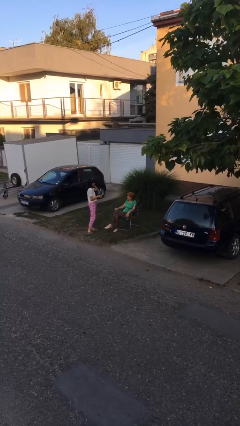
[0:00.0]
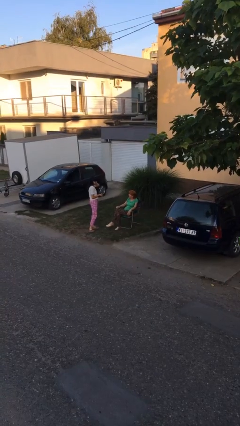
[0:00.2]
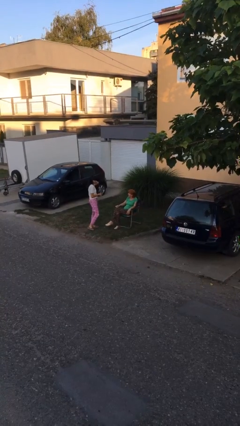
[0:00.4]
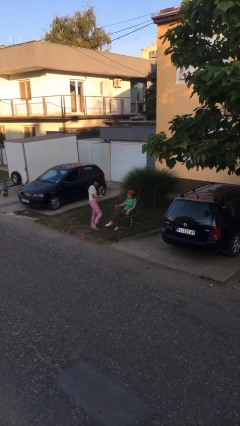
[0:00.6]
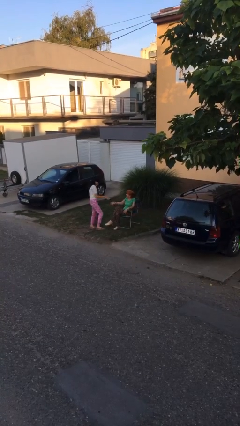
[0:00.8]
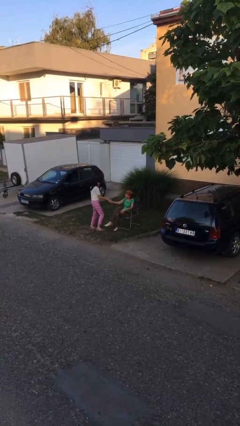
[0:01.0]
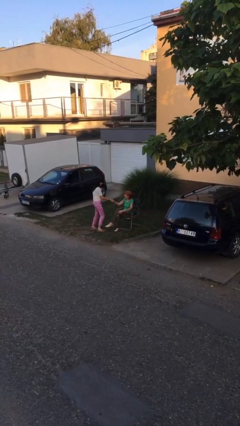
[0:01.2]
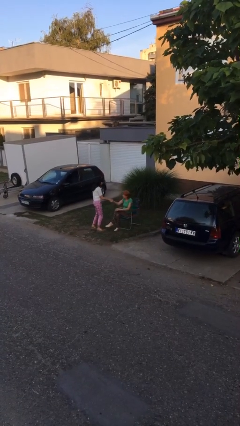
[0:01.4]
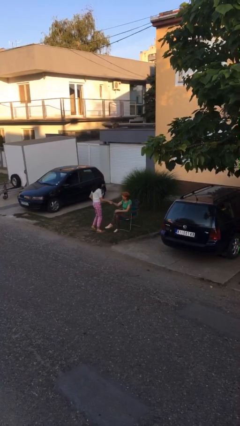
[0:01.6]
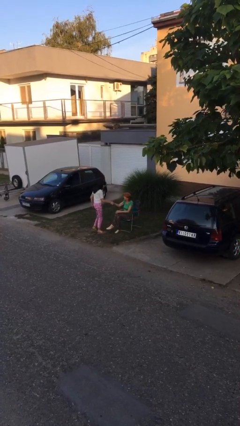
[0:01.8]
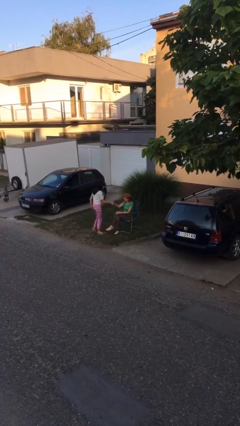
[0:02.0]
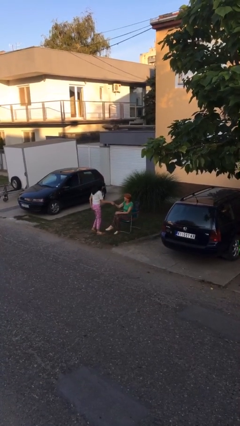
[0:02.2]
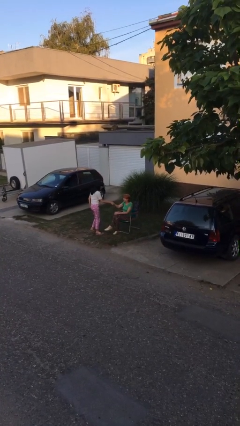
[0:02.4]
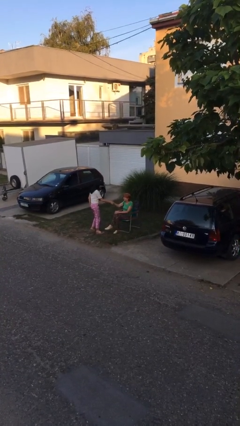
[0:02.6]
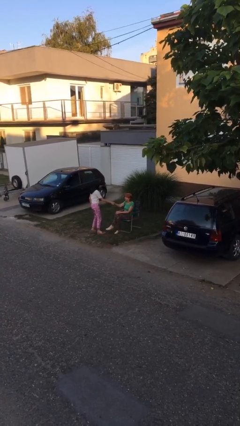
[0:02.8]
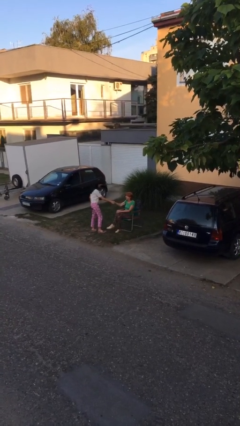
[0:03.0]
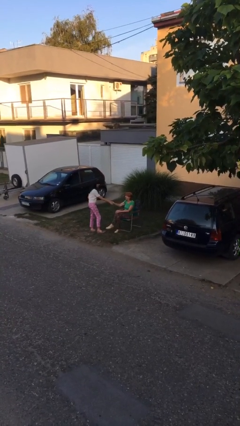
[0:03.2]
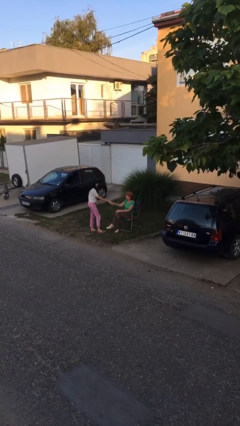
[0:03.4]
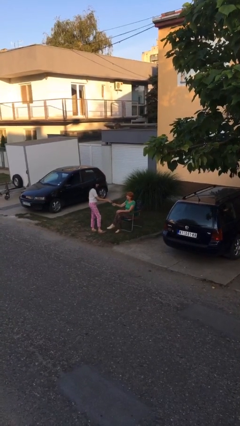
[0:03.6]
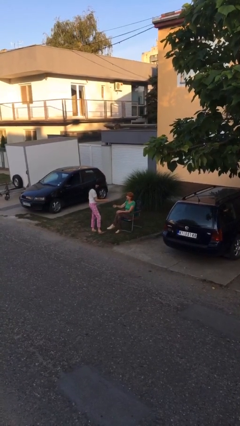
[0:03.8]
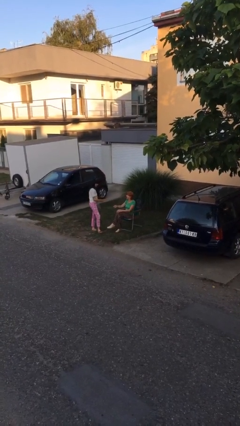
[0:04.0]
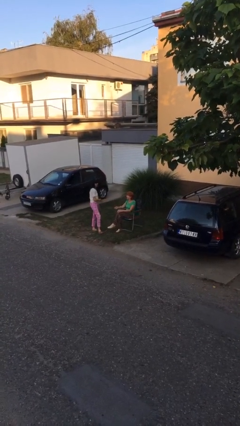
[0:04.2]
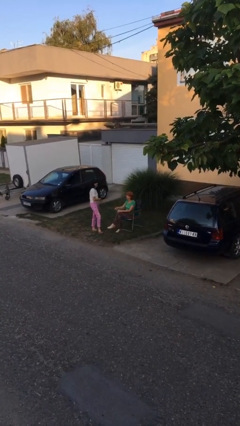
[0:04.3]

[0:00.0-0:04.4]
person shakes hand

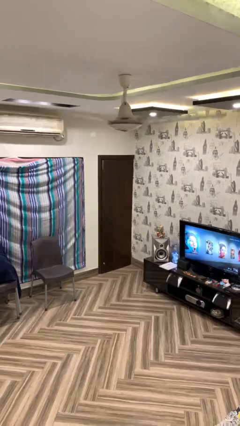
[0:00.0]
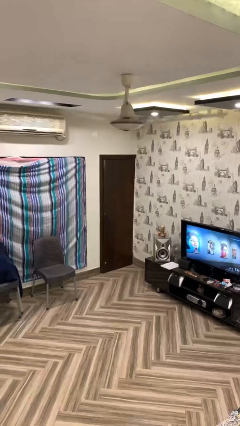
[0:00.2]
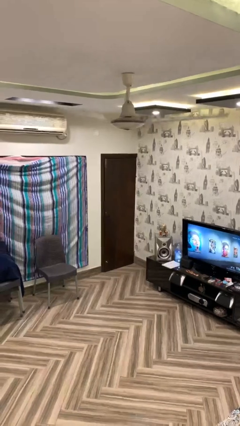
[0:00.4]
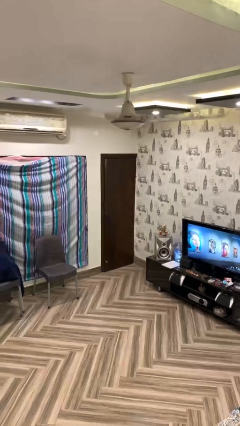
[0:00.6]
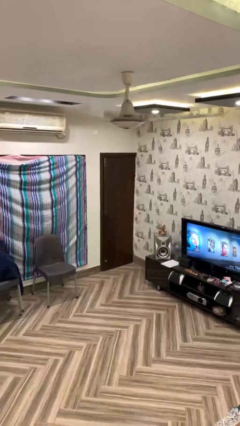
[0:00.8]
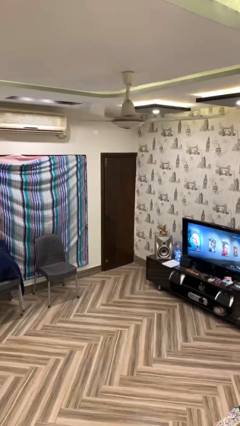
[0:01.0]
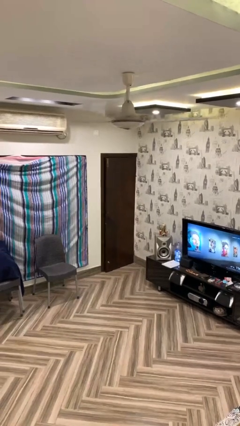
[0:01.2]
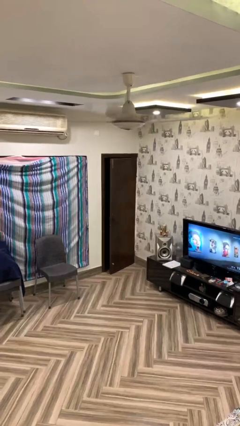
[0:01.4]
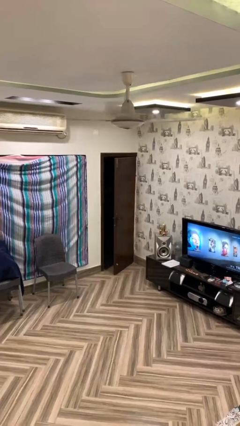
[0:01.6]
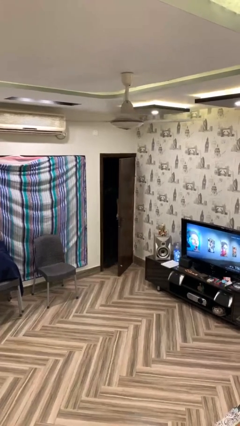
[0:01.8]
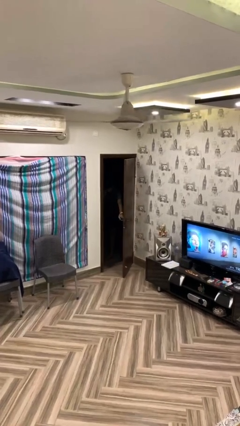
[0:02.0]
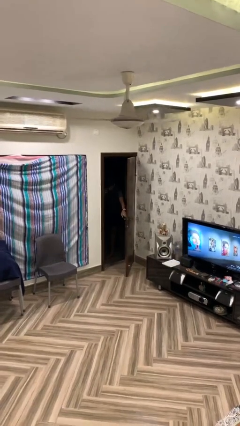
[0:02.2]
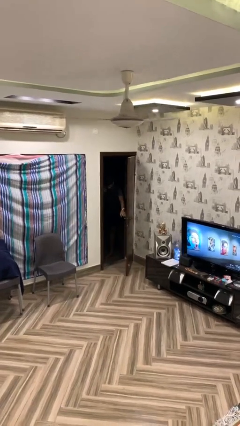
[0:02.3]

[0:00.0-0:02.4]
person opens facility door

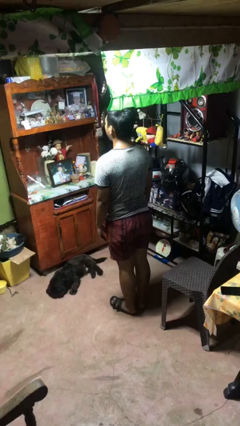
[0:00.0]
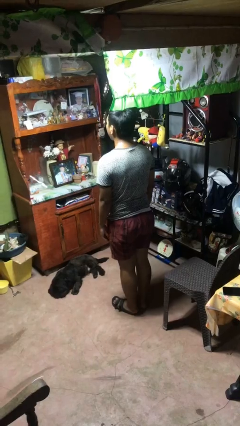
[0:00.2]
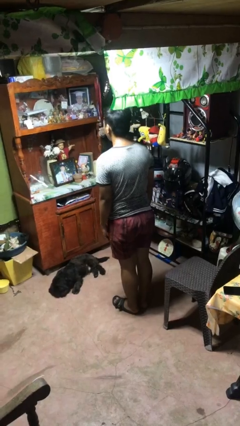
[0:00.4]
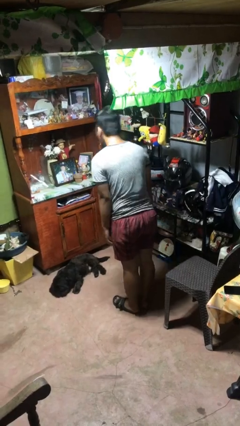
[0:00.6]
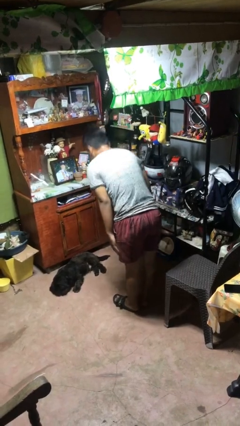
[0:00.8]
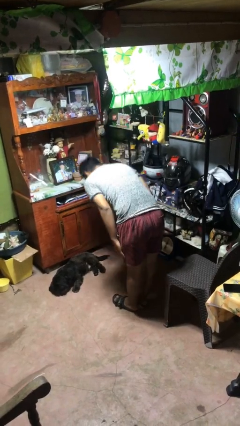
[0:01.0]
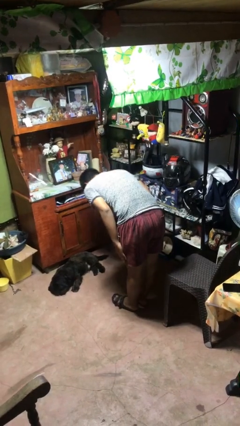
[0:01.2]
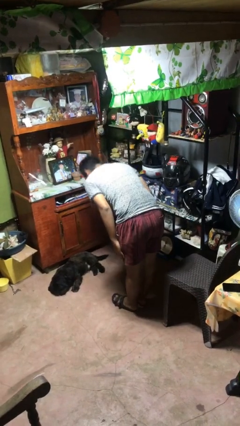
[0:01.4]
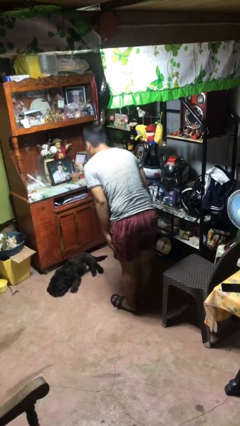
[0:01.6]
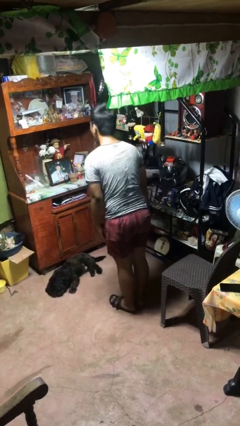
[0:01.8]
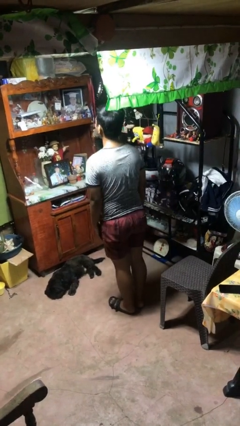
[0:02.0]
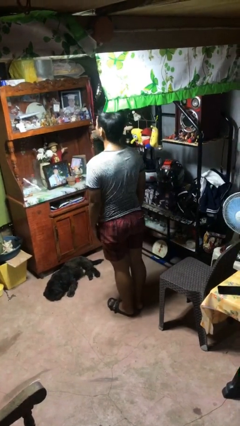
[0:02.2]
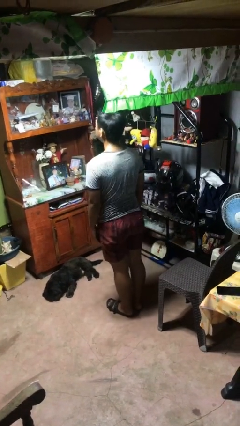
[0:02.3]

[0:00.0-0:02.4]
person bows

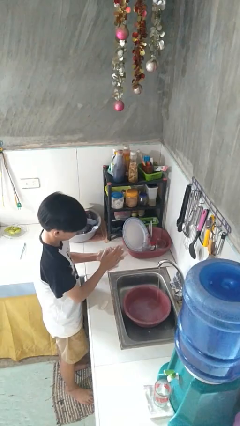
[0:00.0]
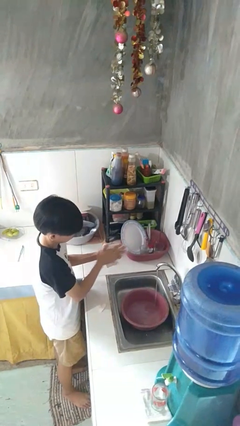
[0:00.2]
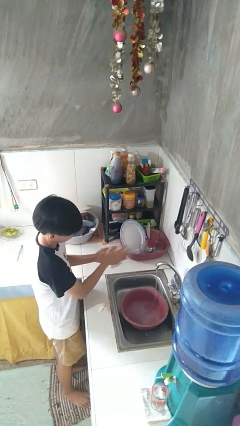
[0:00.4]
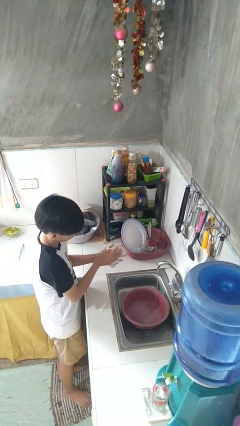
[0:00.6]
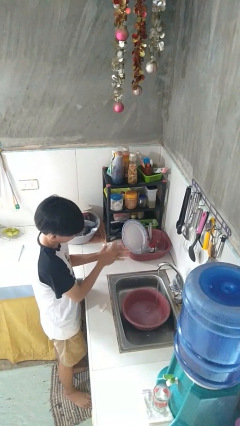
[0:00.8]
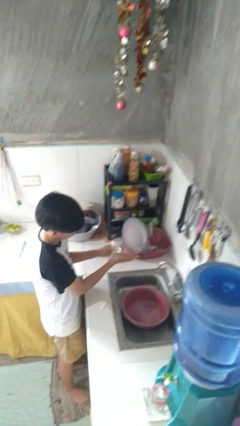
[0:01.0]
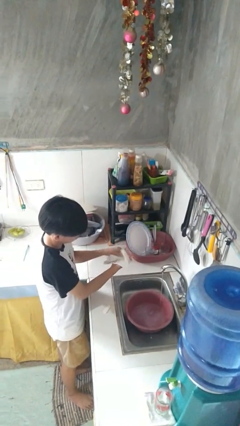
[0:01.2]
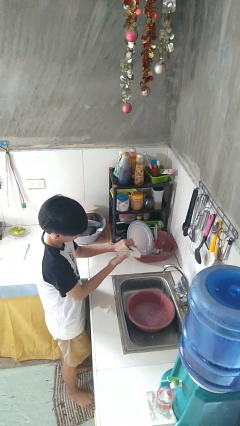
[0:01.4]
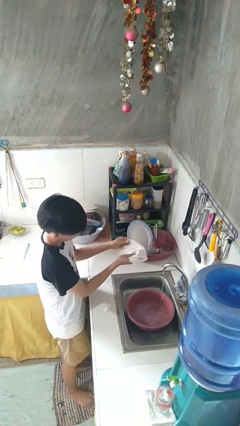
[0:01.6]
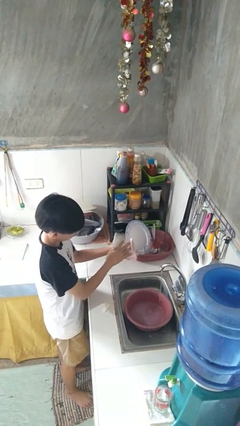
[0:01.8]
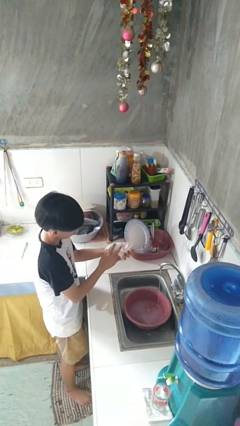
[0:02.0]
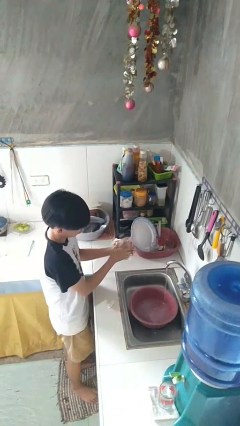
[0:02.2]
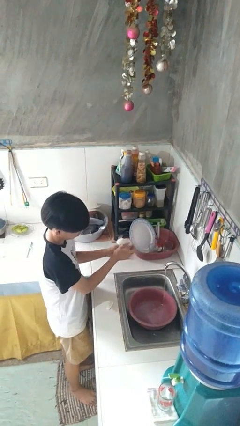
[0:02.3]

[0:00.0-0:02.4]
person dries hands with towel

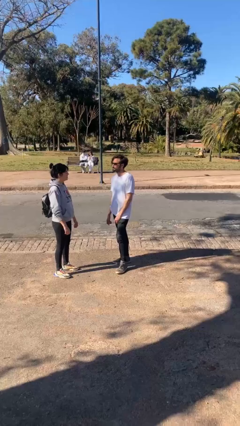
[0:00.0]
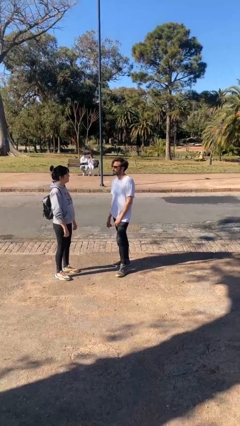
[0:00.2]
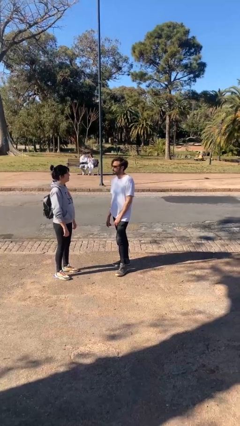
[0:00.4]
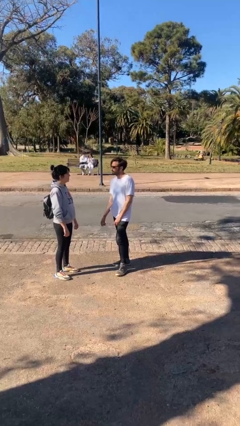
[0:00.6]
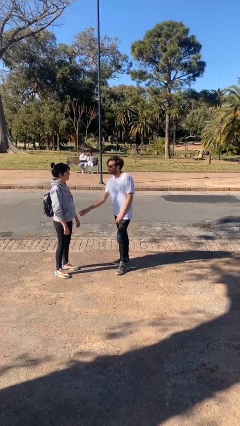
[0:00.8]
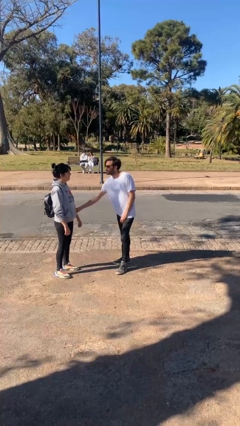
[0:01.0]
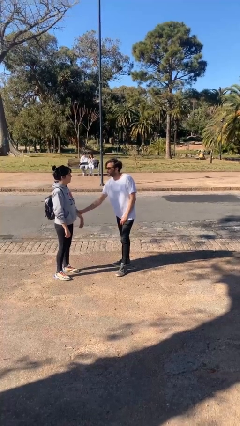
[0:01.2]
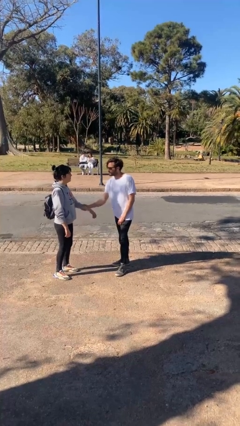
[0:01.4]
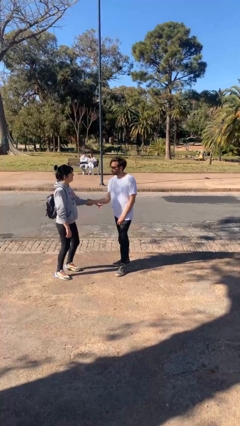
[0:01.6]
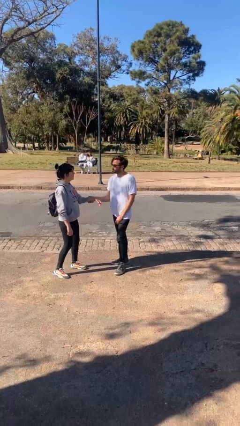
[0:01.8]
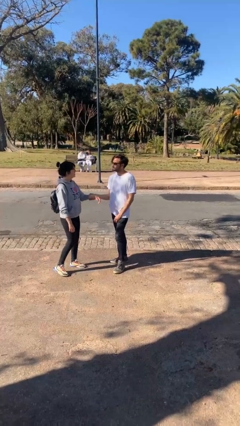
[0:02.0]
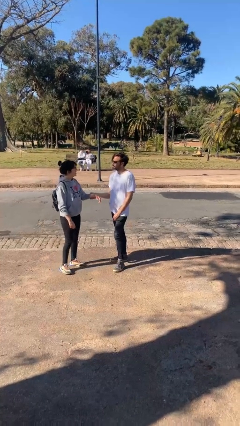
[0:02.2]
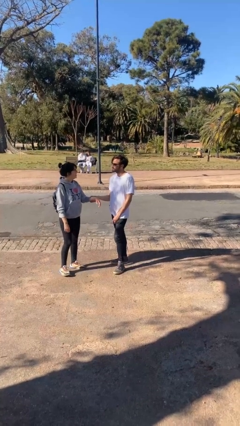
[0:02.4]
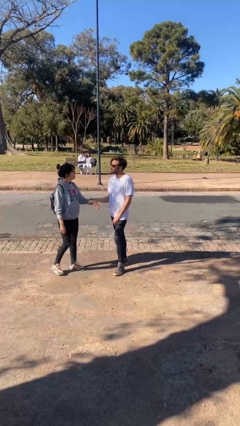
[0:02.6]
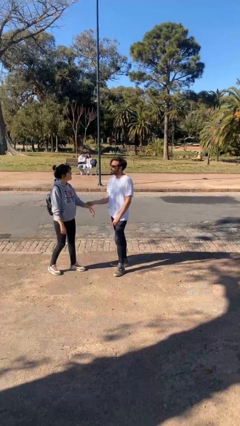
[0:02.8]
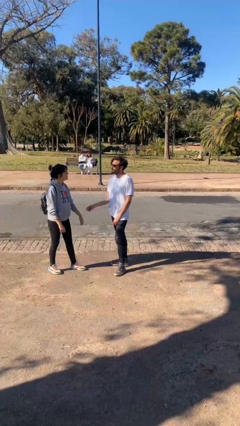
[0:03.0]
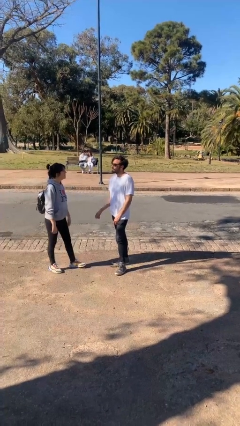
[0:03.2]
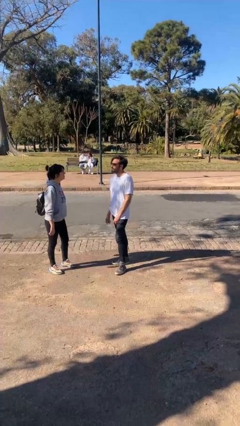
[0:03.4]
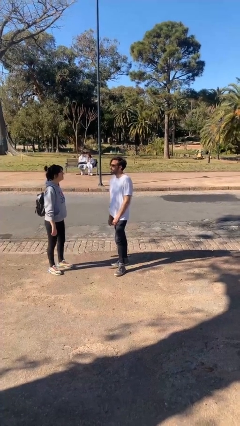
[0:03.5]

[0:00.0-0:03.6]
person grabs person by forearm

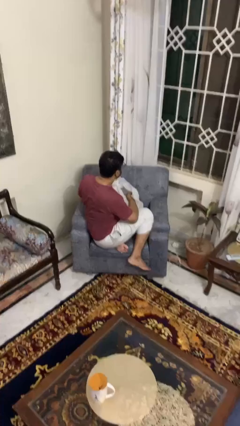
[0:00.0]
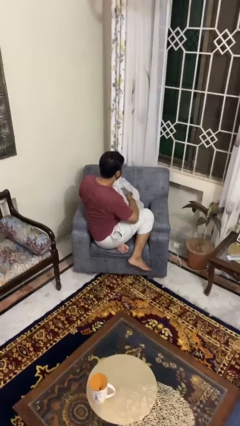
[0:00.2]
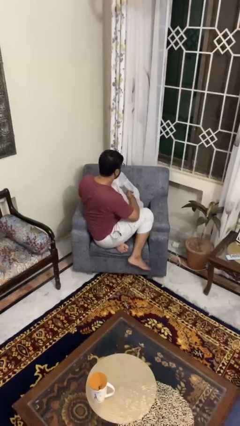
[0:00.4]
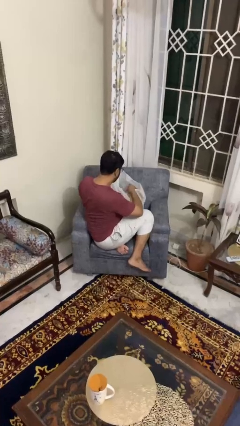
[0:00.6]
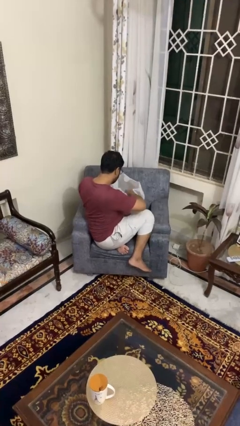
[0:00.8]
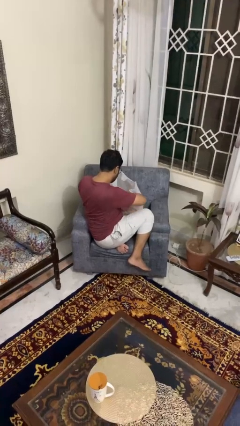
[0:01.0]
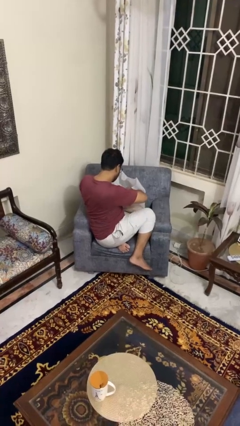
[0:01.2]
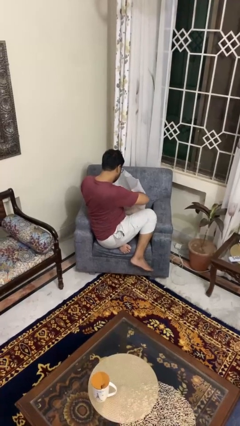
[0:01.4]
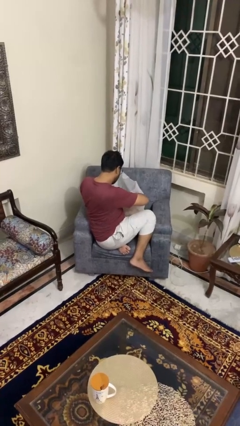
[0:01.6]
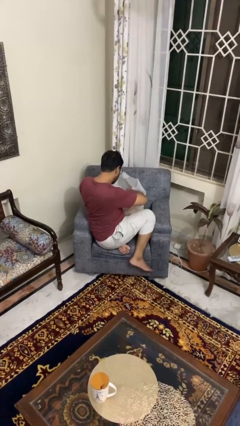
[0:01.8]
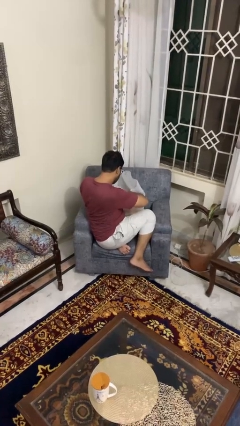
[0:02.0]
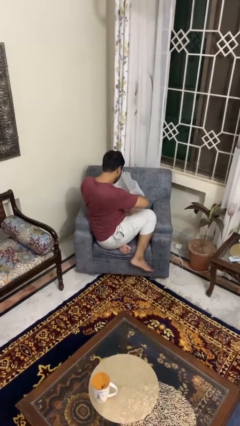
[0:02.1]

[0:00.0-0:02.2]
person searches in bag

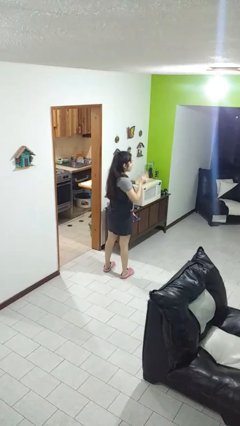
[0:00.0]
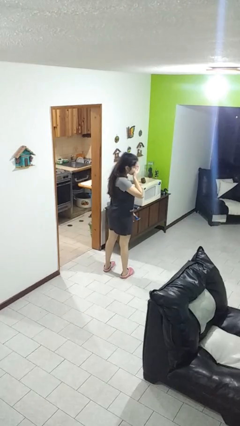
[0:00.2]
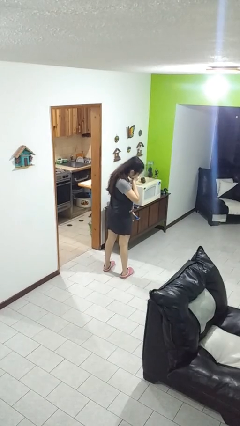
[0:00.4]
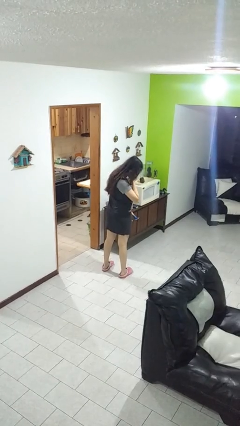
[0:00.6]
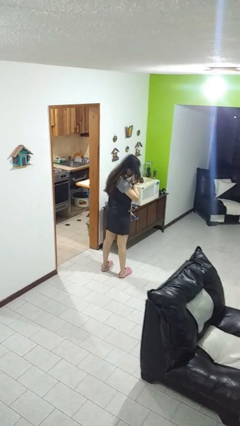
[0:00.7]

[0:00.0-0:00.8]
person sneezes into hand
